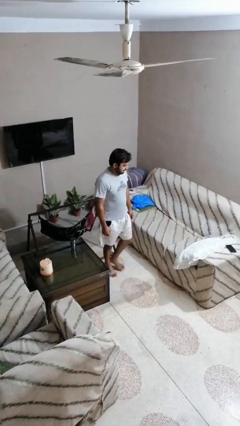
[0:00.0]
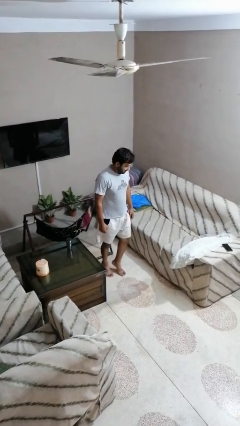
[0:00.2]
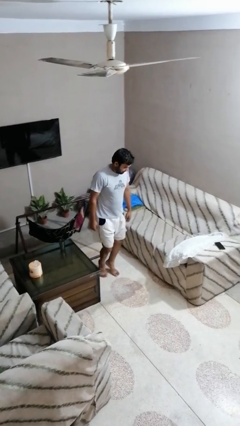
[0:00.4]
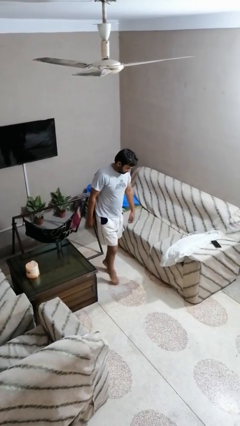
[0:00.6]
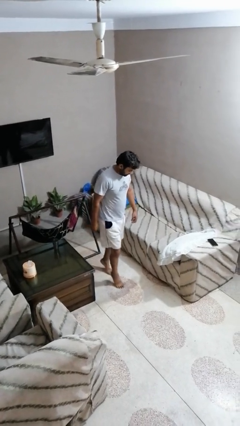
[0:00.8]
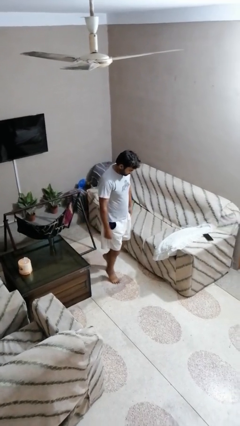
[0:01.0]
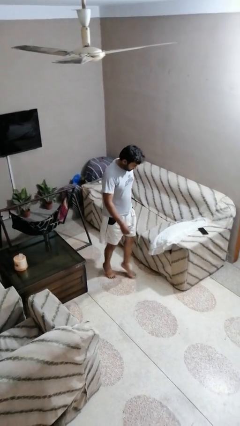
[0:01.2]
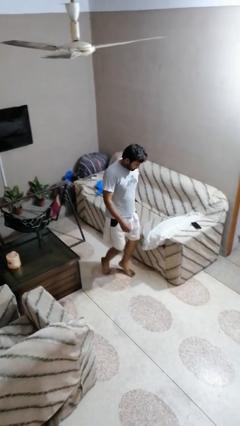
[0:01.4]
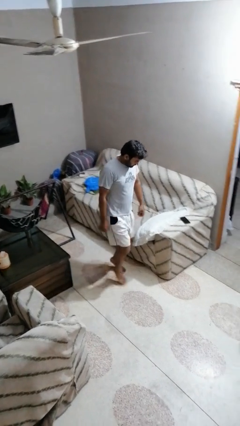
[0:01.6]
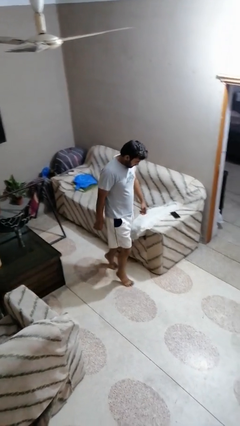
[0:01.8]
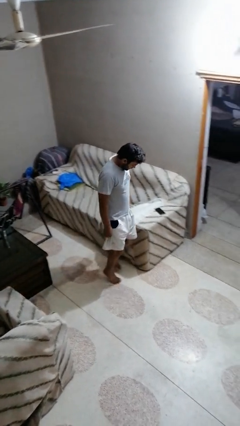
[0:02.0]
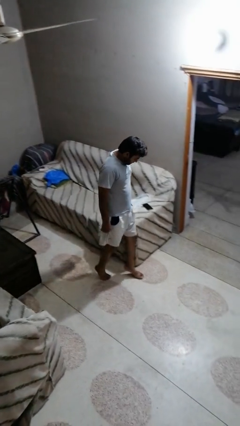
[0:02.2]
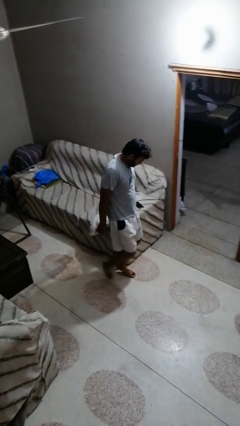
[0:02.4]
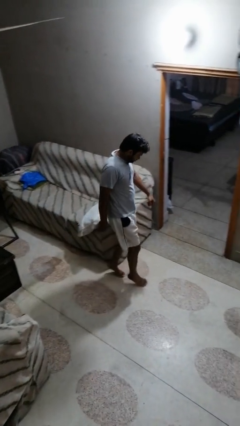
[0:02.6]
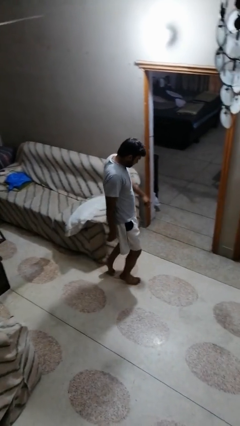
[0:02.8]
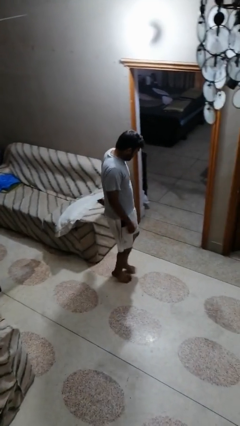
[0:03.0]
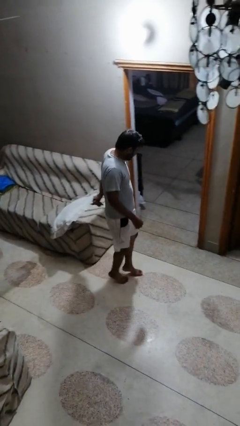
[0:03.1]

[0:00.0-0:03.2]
person walks tiptoe

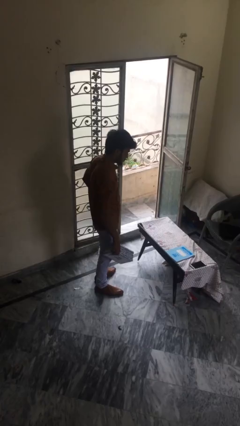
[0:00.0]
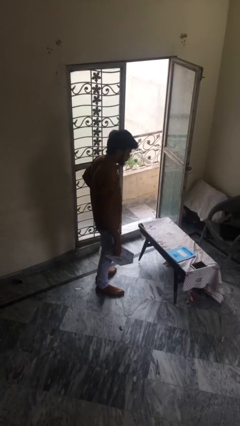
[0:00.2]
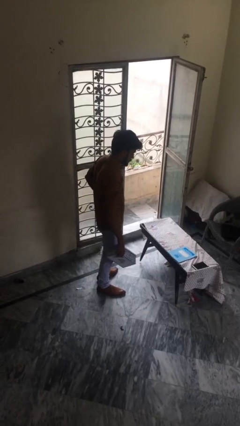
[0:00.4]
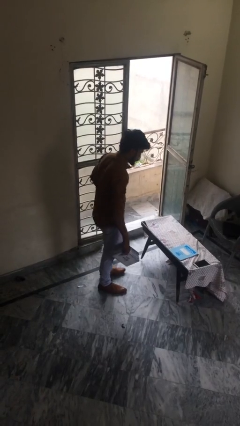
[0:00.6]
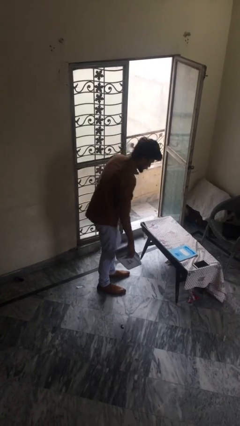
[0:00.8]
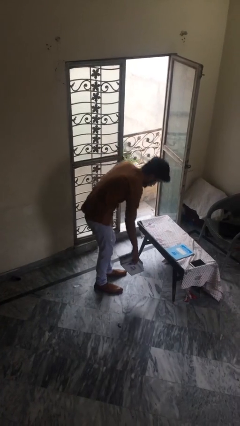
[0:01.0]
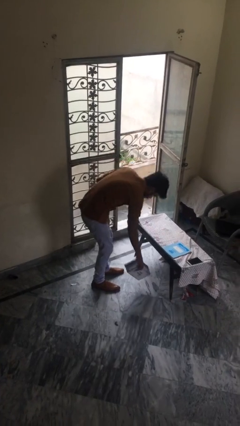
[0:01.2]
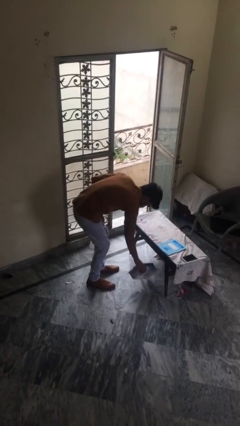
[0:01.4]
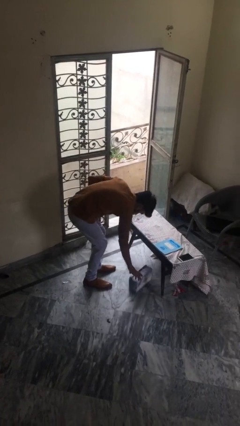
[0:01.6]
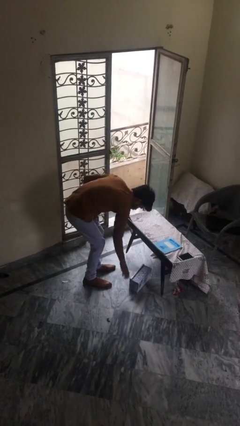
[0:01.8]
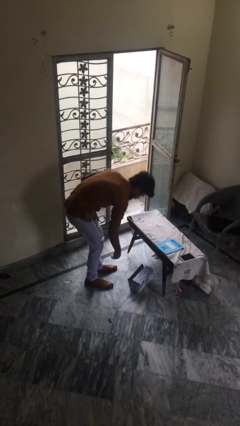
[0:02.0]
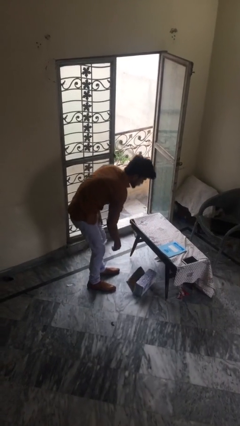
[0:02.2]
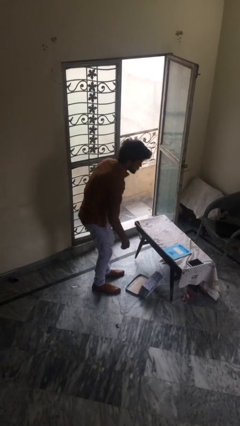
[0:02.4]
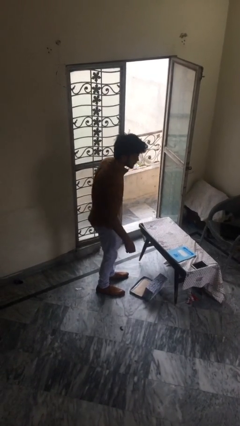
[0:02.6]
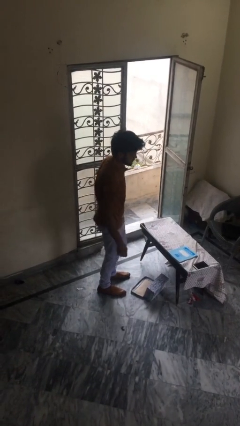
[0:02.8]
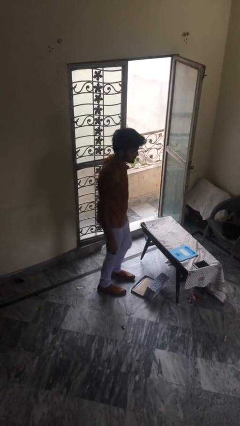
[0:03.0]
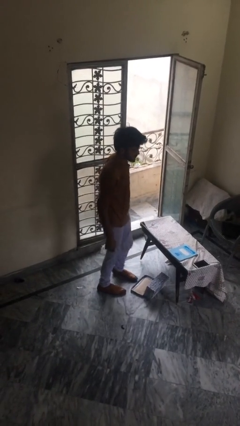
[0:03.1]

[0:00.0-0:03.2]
person puts down object on floor

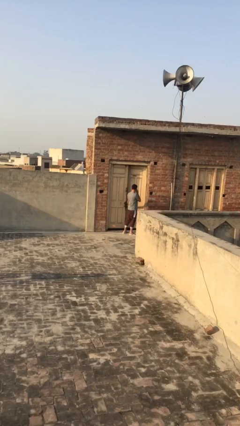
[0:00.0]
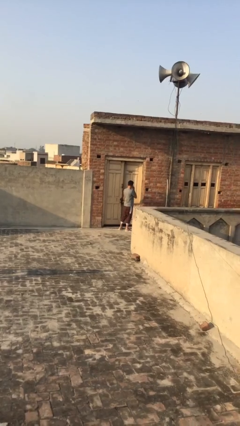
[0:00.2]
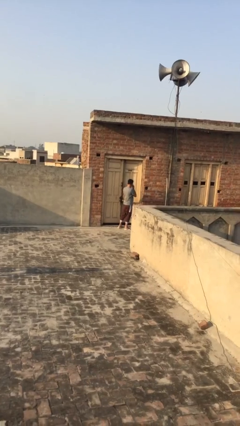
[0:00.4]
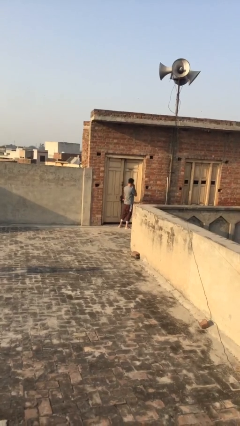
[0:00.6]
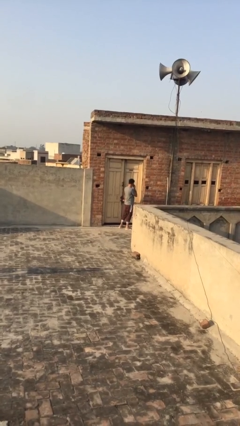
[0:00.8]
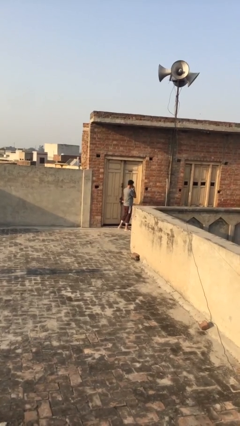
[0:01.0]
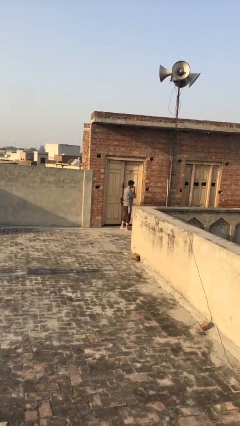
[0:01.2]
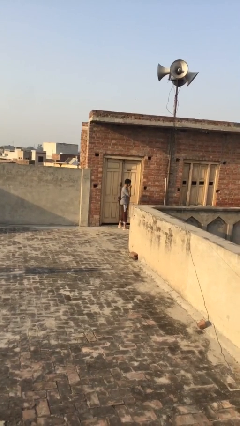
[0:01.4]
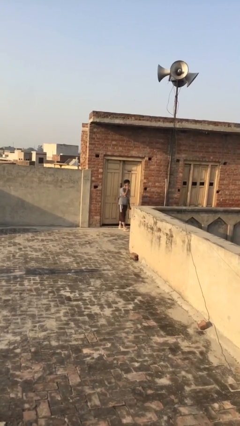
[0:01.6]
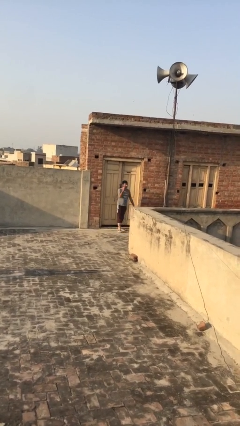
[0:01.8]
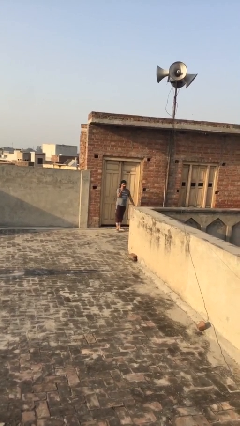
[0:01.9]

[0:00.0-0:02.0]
person closes facility door

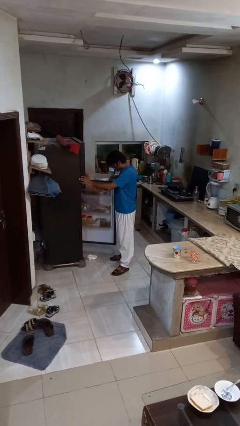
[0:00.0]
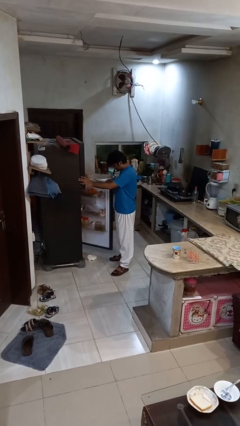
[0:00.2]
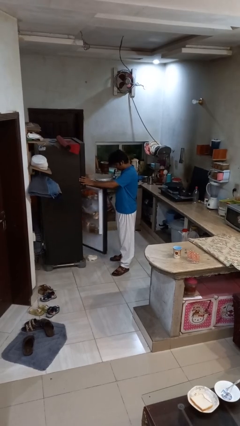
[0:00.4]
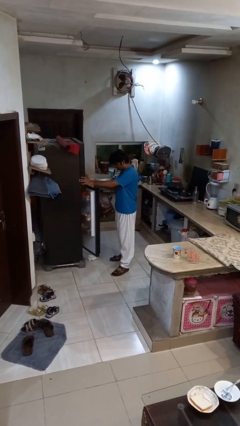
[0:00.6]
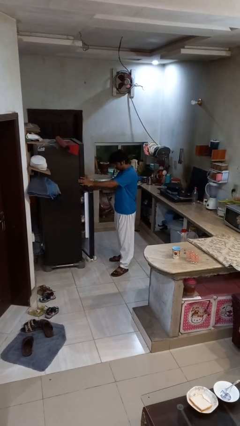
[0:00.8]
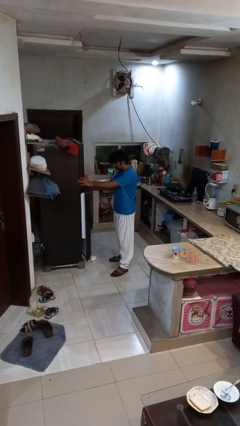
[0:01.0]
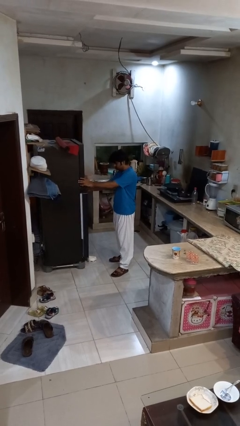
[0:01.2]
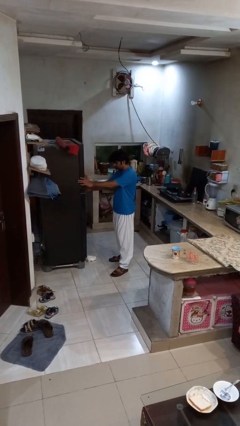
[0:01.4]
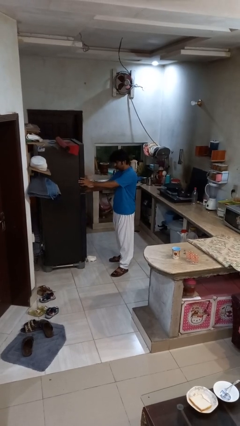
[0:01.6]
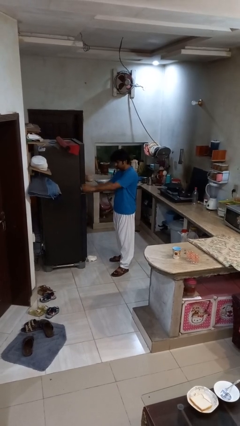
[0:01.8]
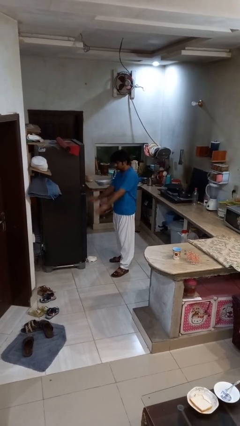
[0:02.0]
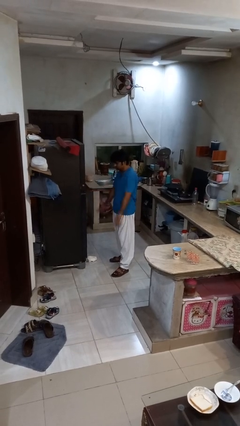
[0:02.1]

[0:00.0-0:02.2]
person closes refrigerator

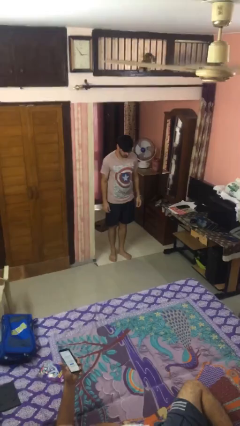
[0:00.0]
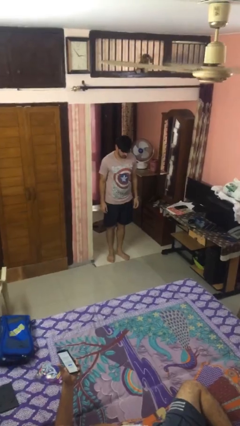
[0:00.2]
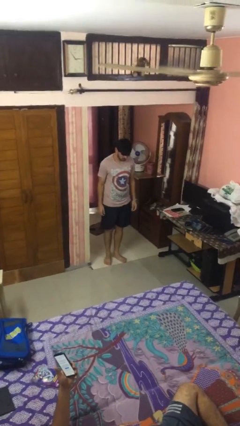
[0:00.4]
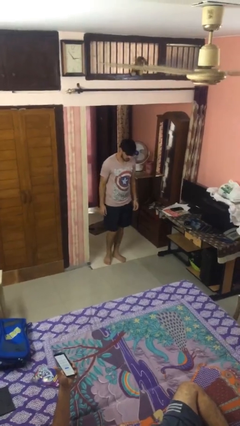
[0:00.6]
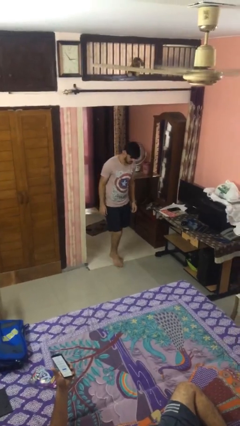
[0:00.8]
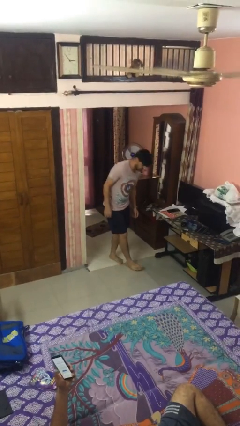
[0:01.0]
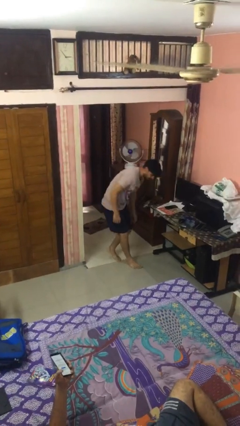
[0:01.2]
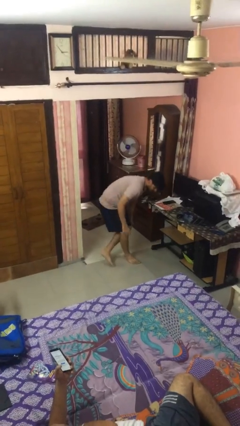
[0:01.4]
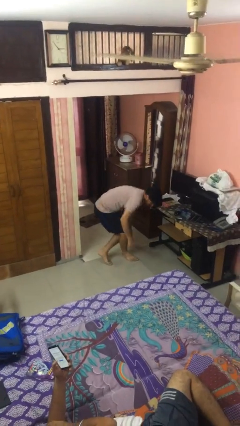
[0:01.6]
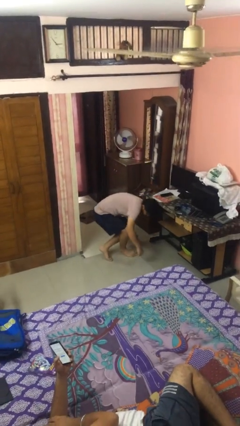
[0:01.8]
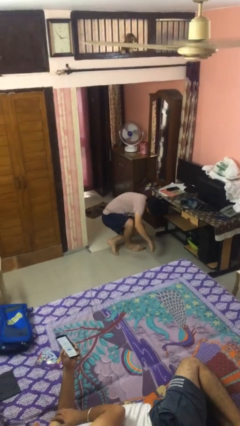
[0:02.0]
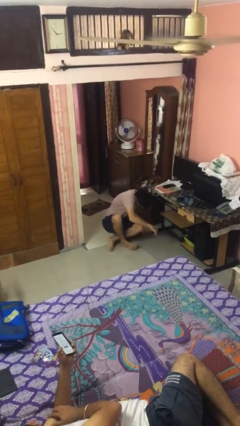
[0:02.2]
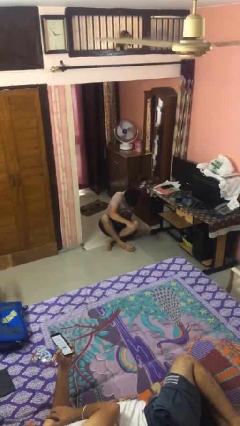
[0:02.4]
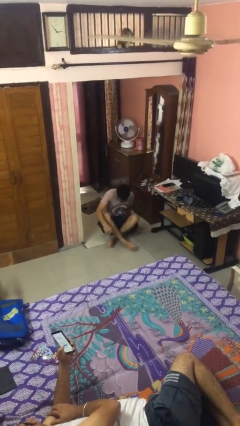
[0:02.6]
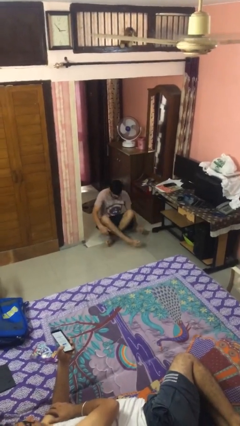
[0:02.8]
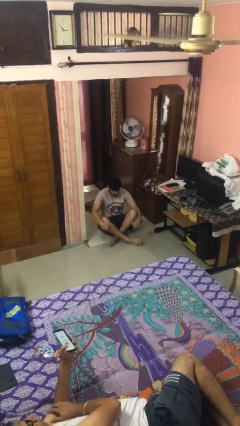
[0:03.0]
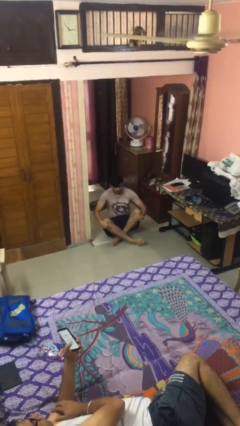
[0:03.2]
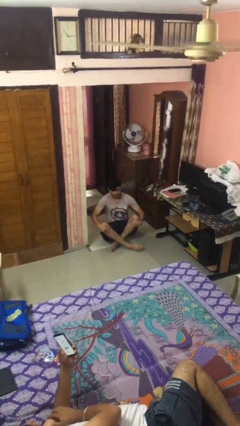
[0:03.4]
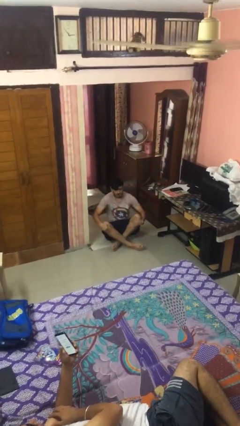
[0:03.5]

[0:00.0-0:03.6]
person sits crisscross

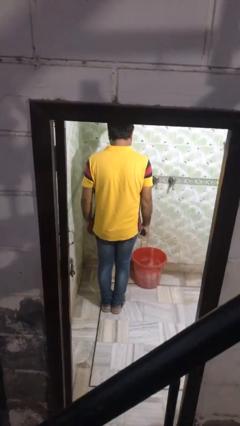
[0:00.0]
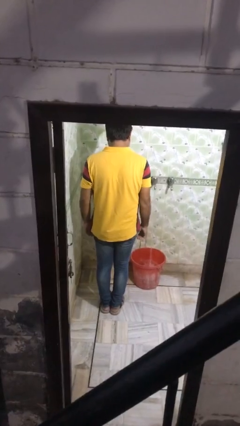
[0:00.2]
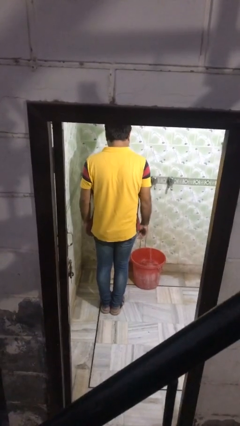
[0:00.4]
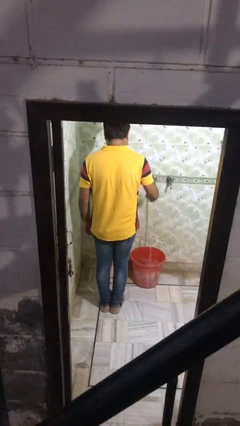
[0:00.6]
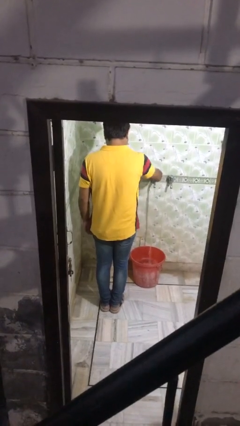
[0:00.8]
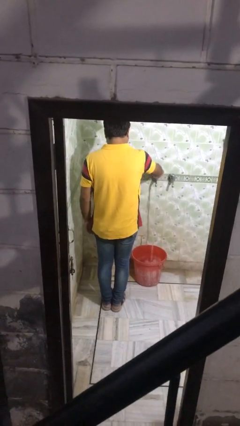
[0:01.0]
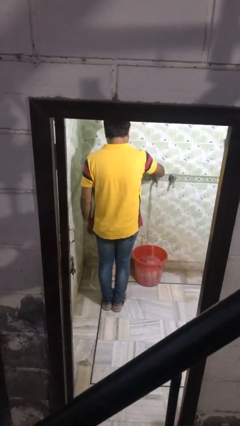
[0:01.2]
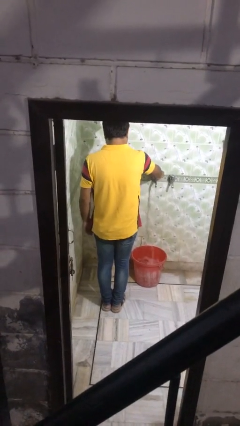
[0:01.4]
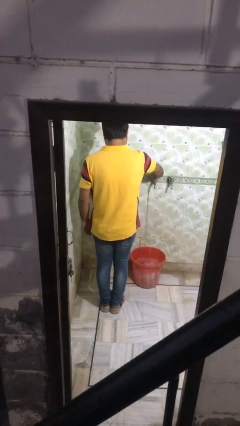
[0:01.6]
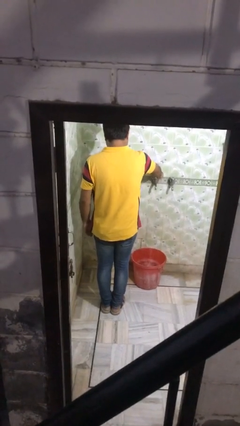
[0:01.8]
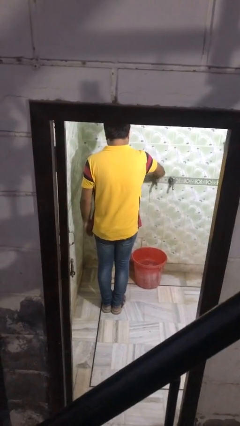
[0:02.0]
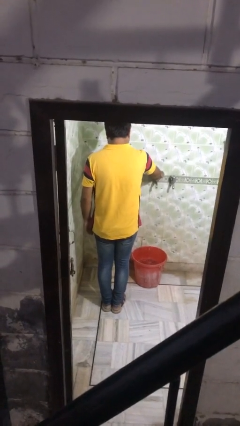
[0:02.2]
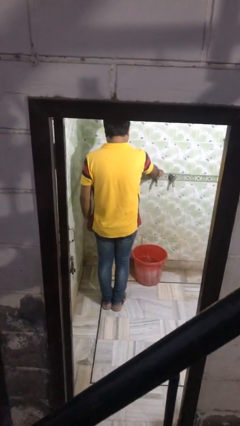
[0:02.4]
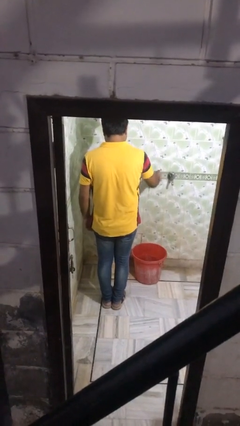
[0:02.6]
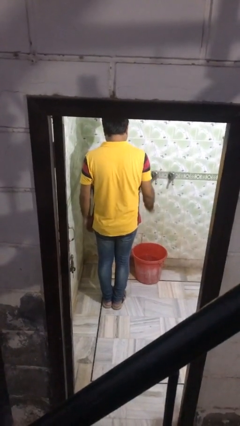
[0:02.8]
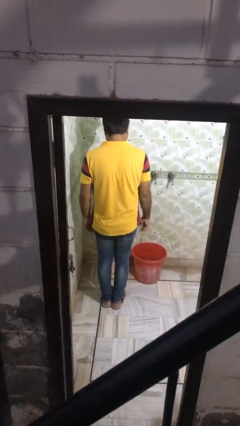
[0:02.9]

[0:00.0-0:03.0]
person turns off faucet

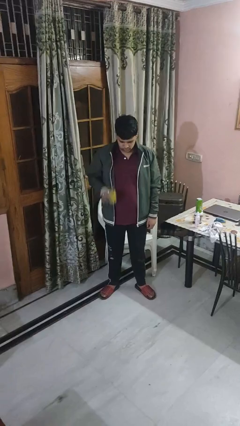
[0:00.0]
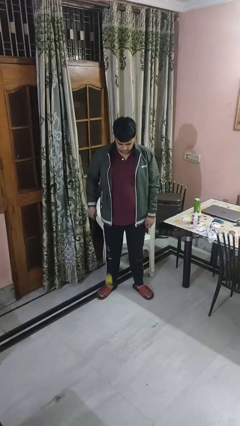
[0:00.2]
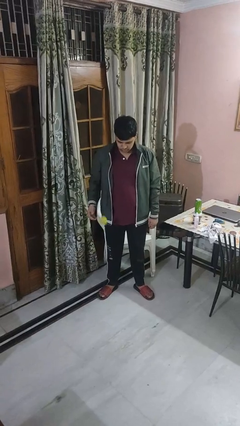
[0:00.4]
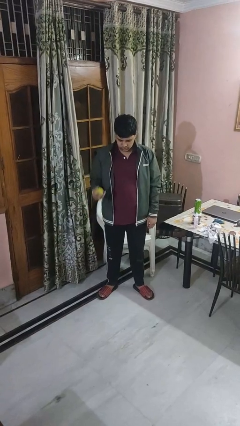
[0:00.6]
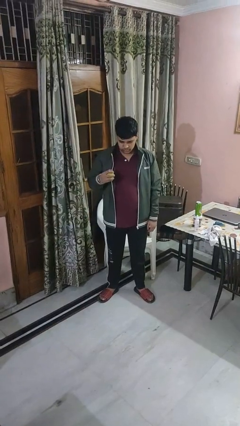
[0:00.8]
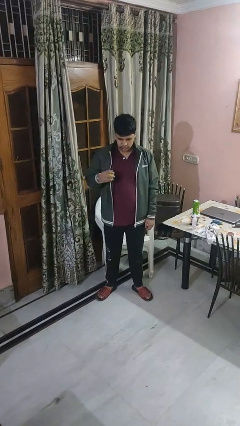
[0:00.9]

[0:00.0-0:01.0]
person bounces ball on floor
